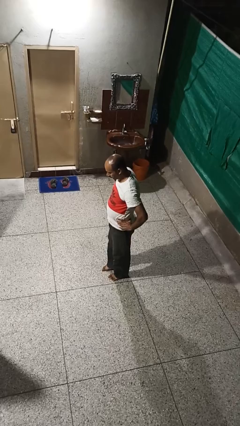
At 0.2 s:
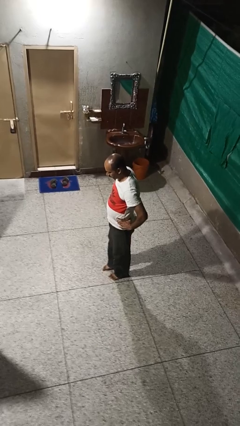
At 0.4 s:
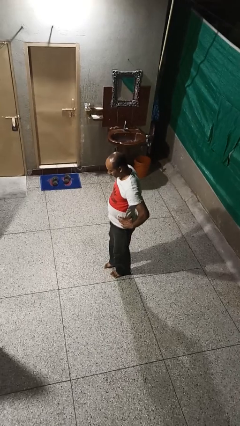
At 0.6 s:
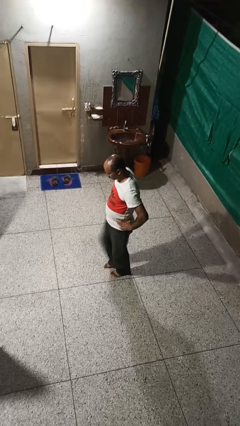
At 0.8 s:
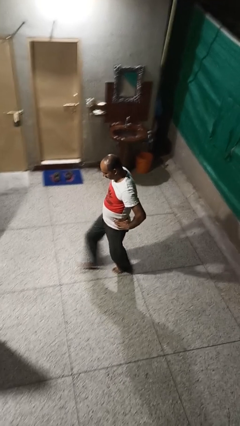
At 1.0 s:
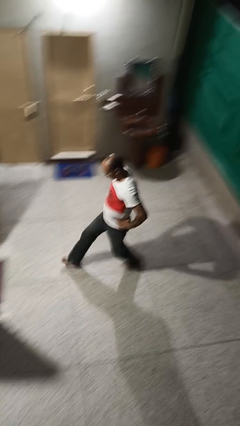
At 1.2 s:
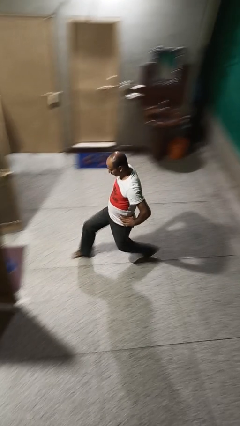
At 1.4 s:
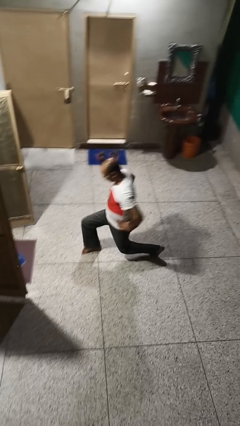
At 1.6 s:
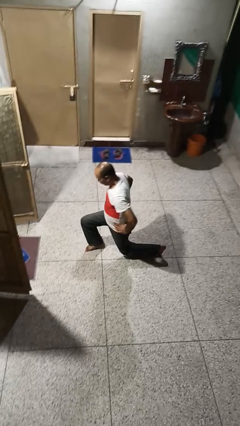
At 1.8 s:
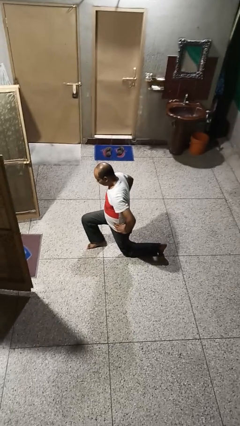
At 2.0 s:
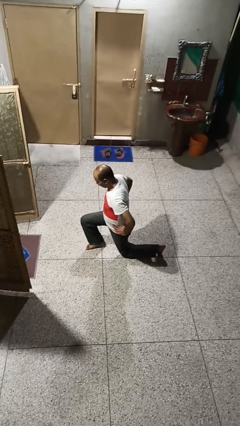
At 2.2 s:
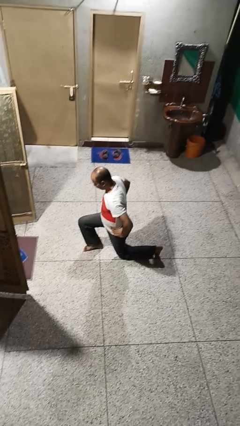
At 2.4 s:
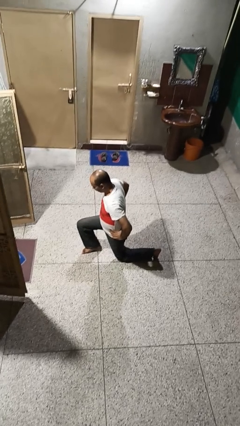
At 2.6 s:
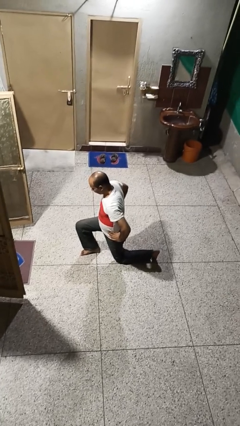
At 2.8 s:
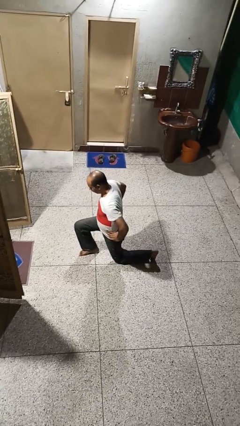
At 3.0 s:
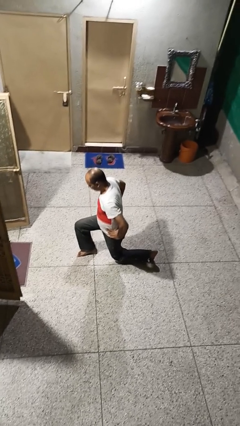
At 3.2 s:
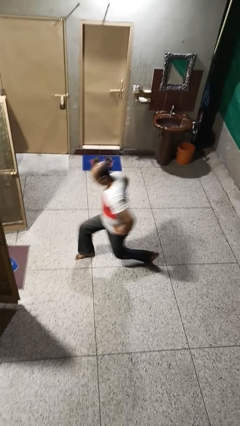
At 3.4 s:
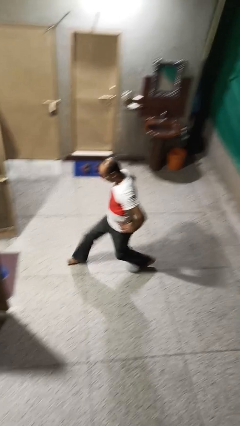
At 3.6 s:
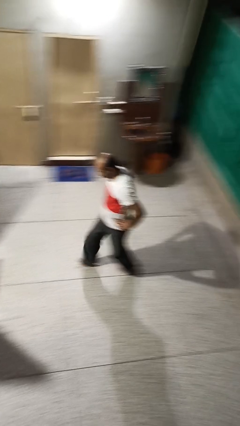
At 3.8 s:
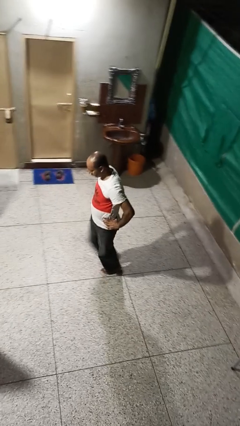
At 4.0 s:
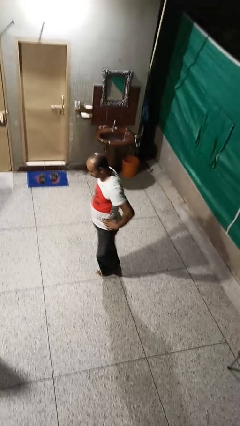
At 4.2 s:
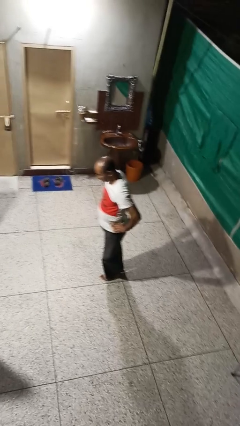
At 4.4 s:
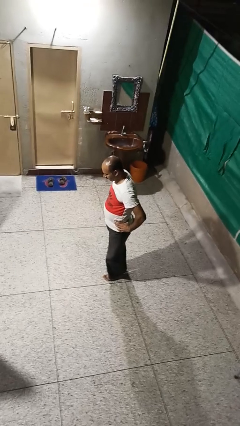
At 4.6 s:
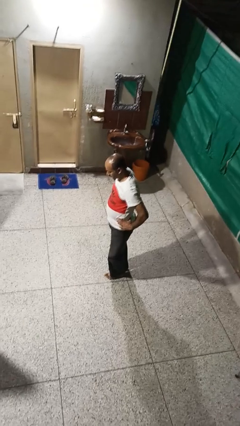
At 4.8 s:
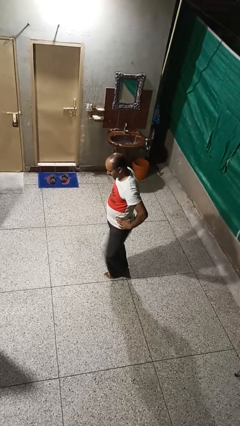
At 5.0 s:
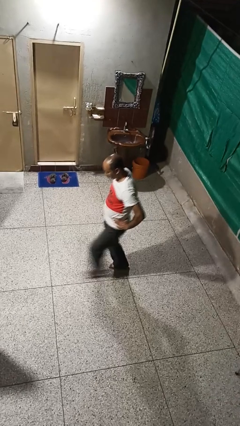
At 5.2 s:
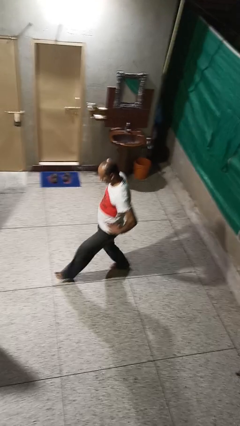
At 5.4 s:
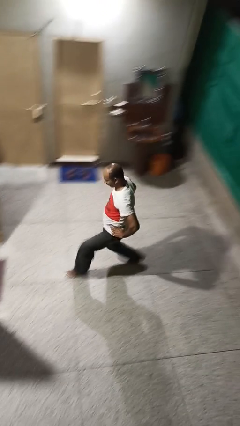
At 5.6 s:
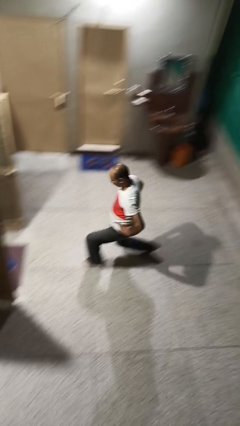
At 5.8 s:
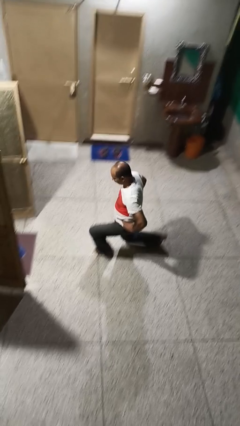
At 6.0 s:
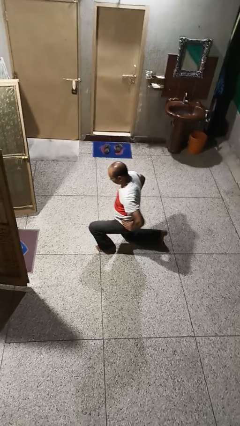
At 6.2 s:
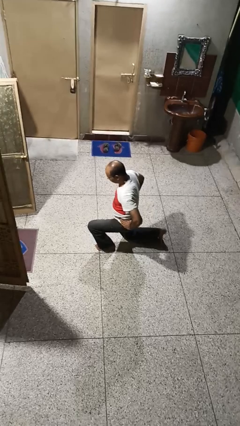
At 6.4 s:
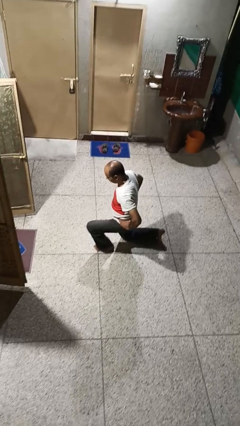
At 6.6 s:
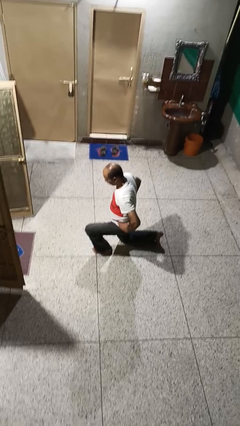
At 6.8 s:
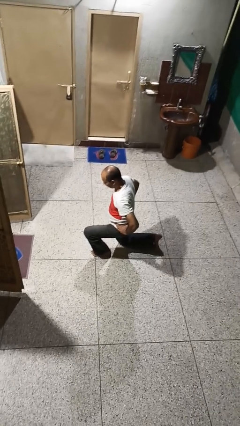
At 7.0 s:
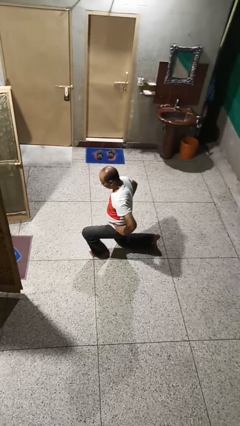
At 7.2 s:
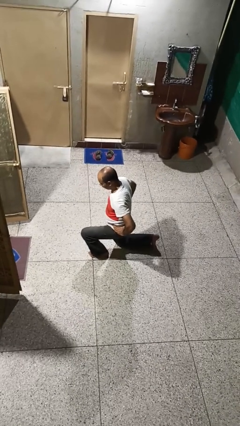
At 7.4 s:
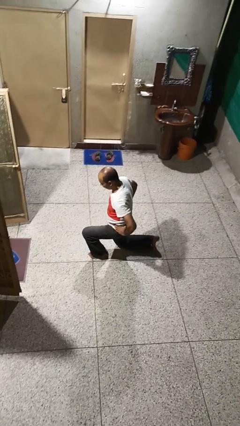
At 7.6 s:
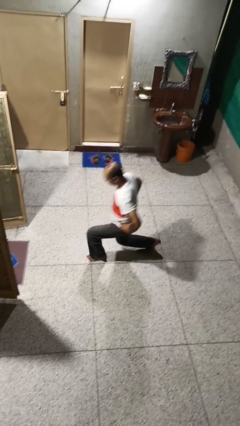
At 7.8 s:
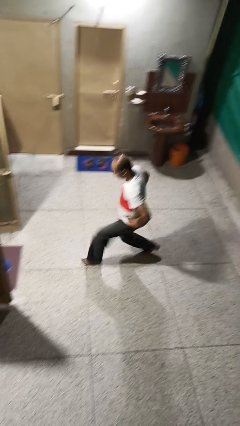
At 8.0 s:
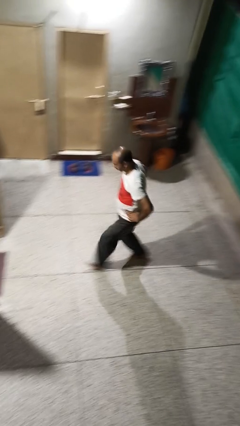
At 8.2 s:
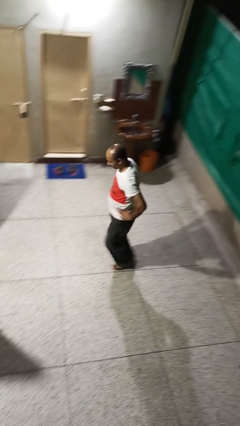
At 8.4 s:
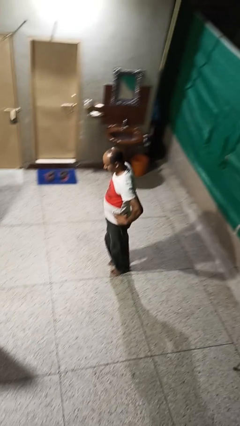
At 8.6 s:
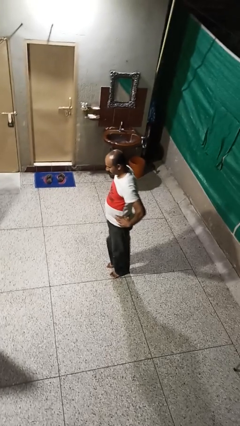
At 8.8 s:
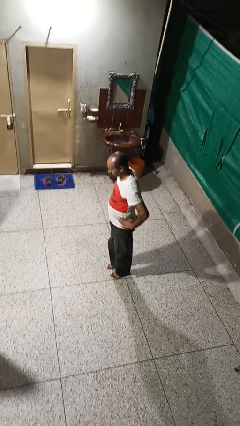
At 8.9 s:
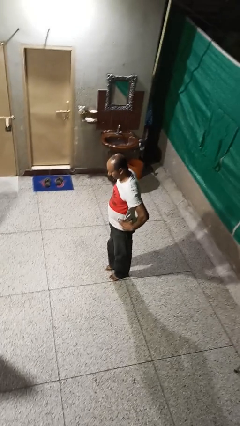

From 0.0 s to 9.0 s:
person exercises with lunges

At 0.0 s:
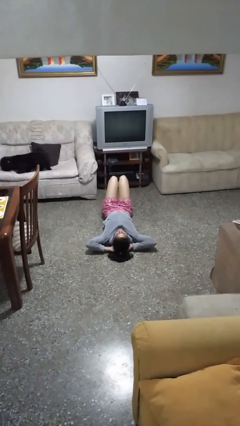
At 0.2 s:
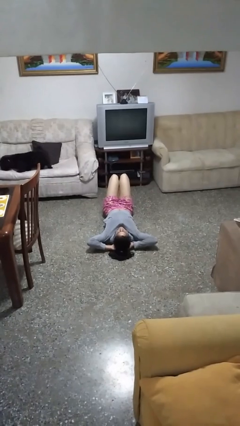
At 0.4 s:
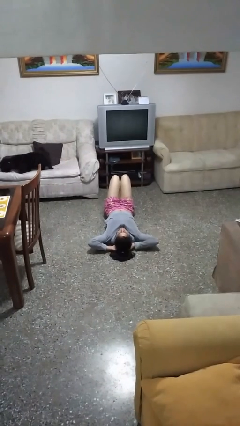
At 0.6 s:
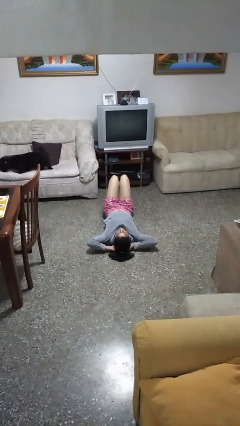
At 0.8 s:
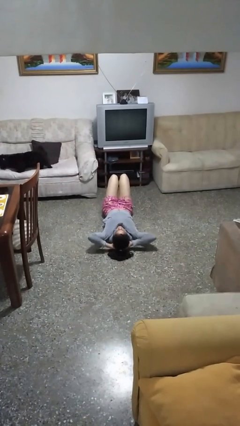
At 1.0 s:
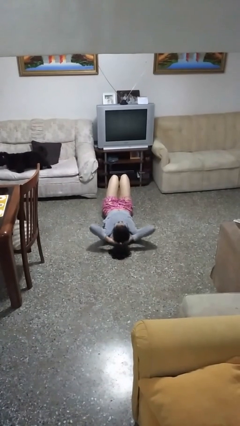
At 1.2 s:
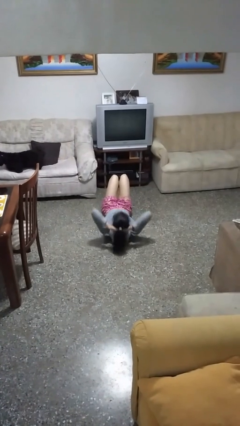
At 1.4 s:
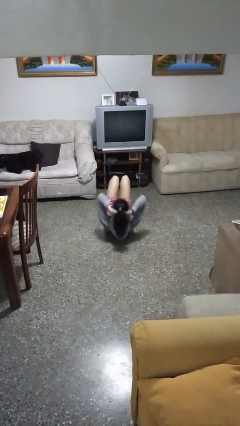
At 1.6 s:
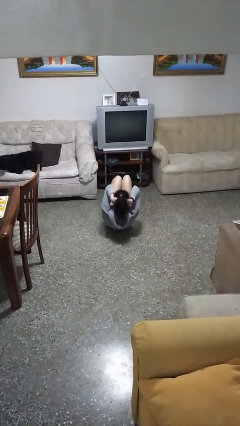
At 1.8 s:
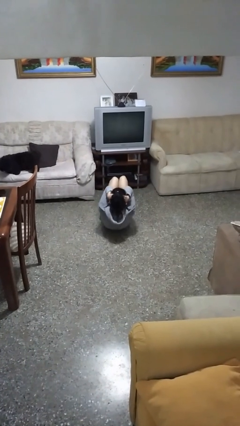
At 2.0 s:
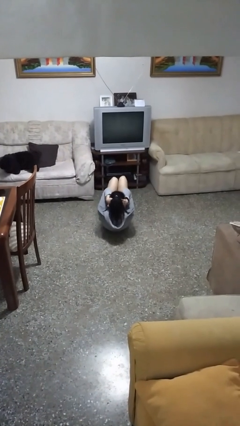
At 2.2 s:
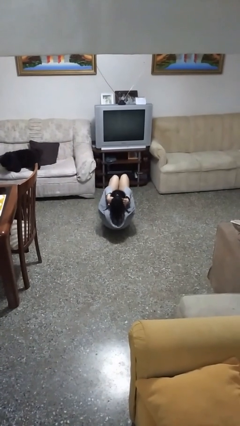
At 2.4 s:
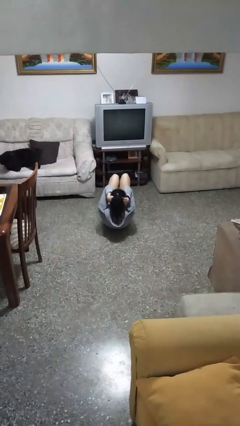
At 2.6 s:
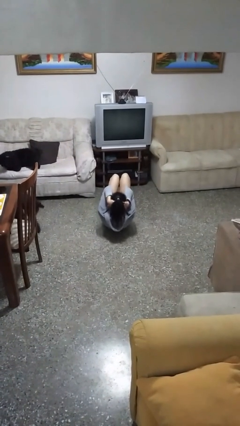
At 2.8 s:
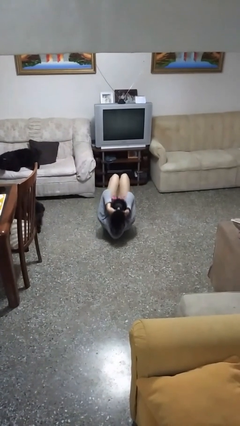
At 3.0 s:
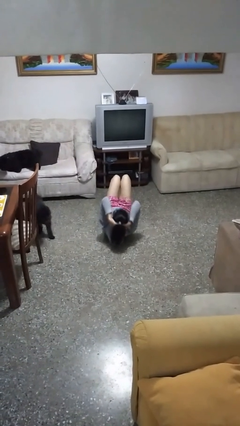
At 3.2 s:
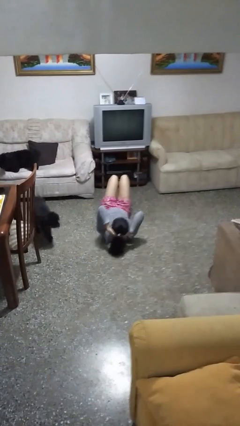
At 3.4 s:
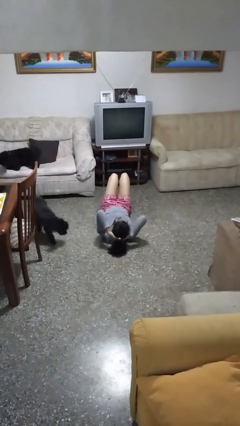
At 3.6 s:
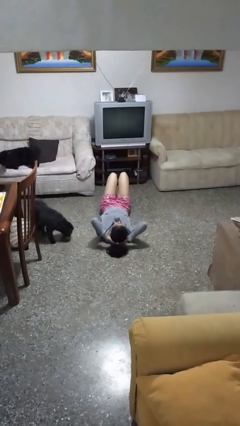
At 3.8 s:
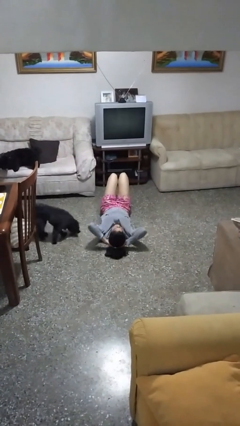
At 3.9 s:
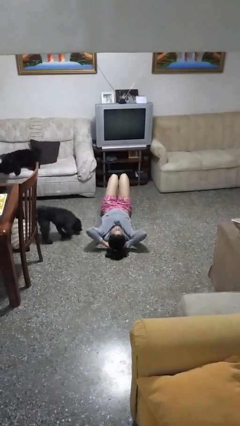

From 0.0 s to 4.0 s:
person exercises with situp

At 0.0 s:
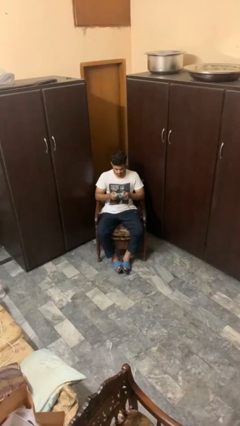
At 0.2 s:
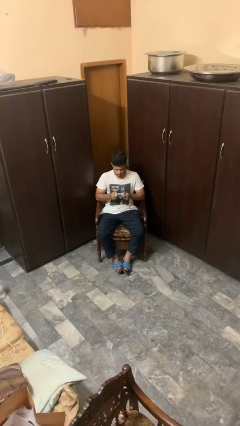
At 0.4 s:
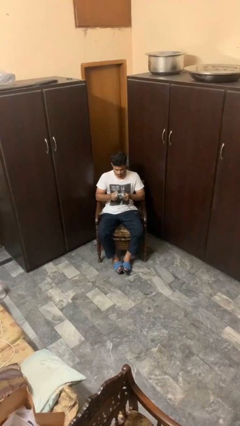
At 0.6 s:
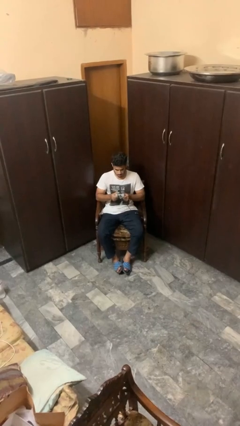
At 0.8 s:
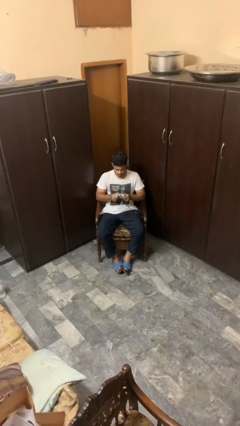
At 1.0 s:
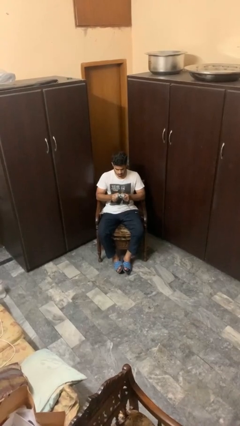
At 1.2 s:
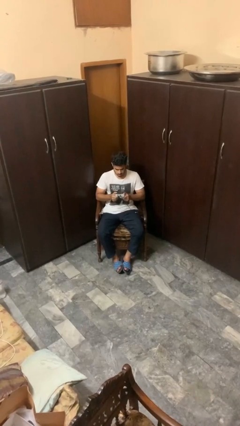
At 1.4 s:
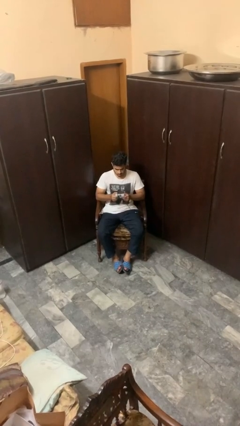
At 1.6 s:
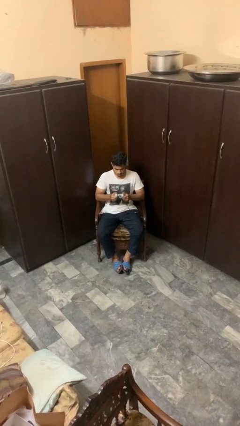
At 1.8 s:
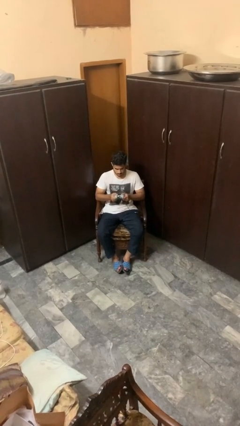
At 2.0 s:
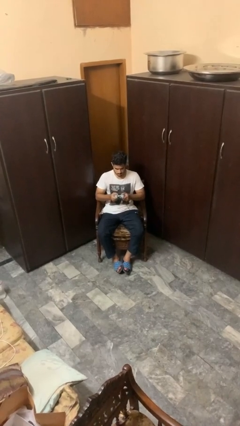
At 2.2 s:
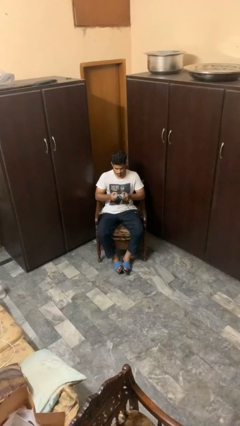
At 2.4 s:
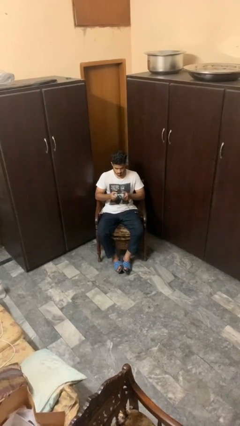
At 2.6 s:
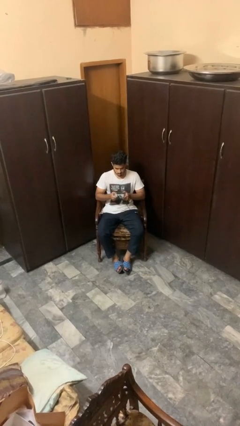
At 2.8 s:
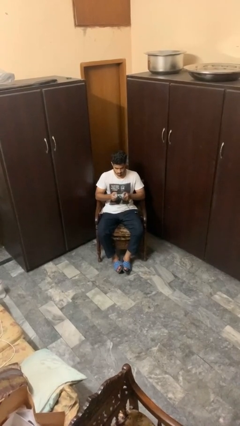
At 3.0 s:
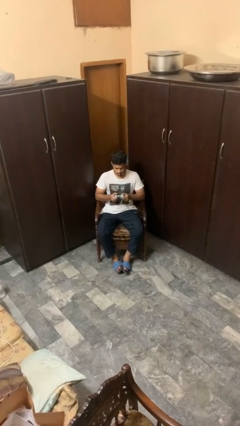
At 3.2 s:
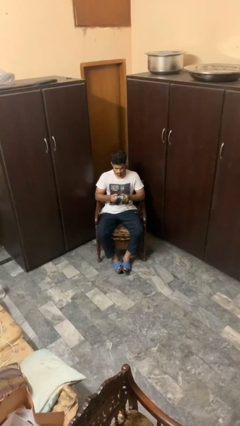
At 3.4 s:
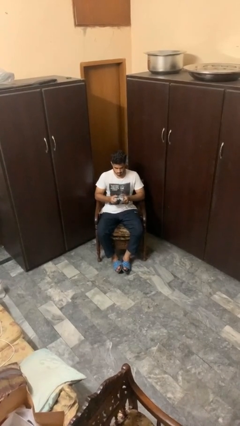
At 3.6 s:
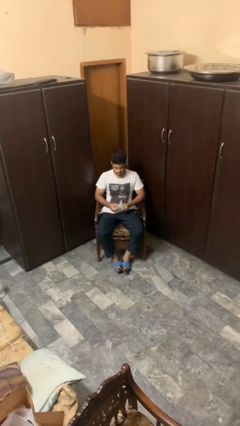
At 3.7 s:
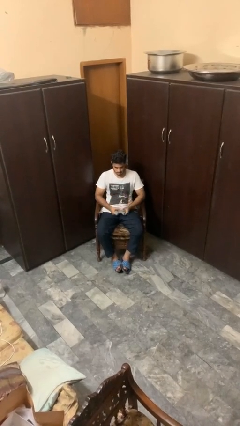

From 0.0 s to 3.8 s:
person interacts with handheld game

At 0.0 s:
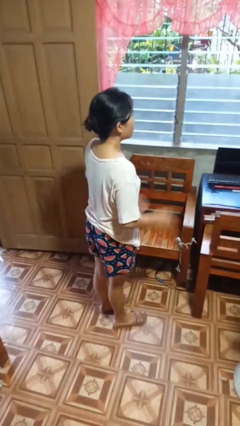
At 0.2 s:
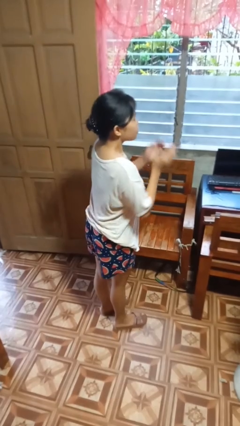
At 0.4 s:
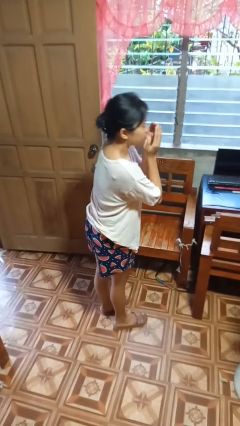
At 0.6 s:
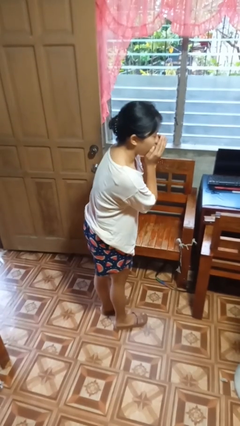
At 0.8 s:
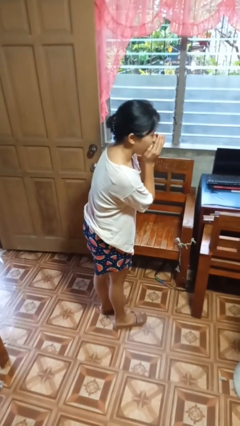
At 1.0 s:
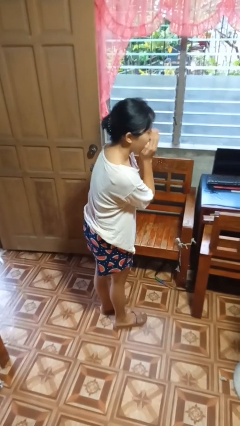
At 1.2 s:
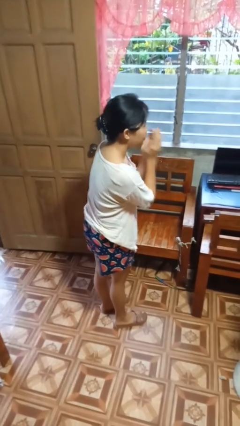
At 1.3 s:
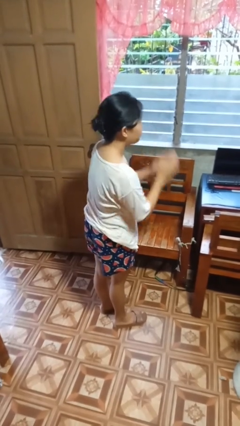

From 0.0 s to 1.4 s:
person sneezes into hand
